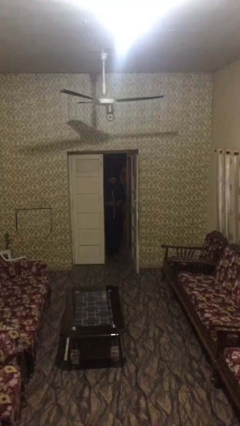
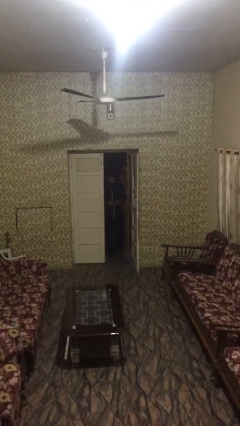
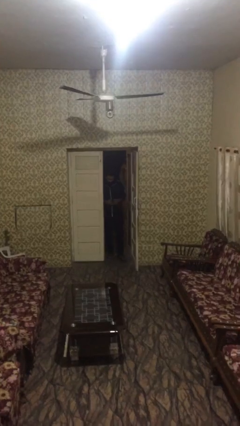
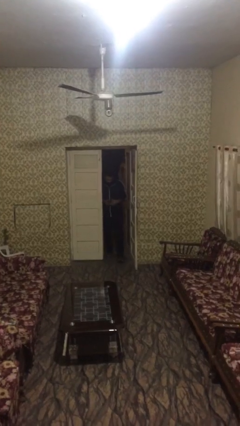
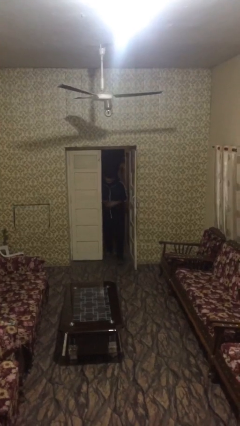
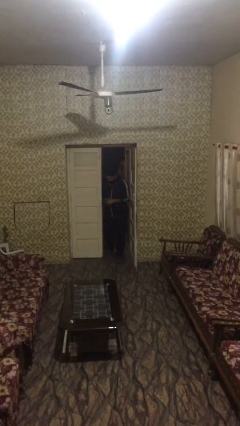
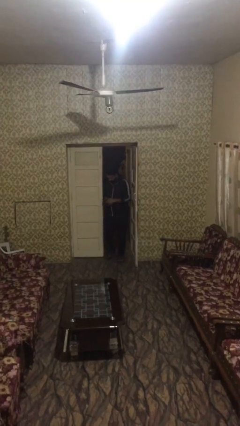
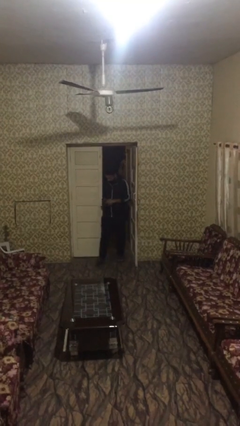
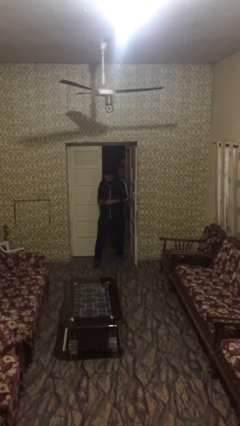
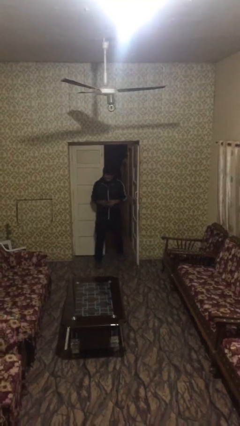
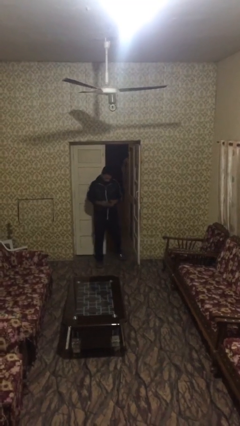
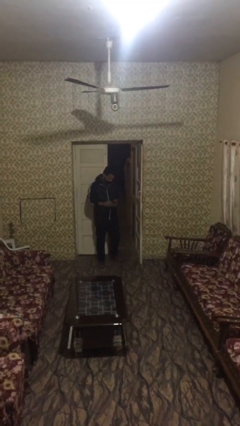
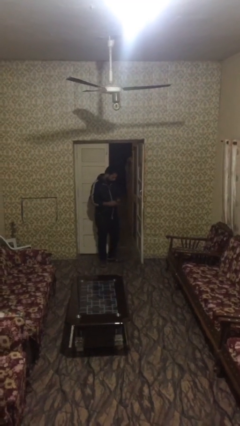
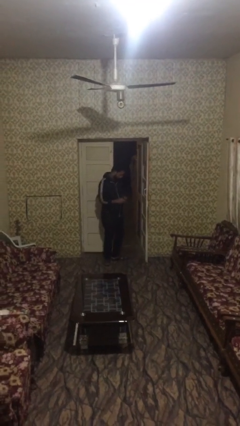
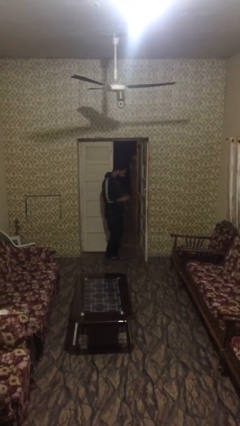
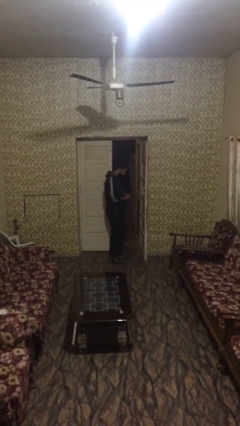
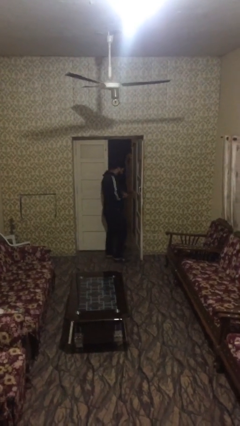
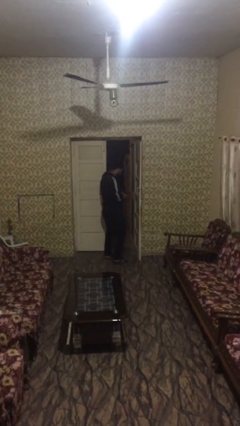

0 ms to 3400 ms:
person enters scene through structure

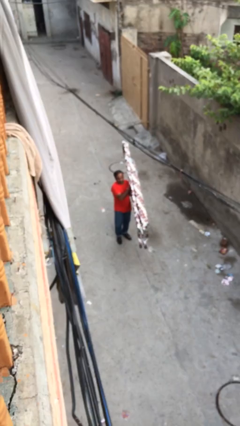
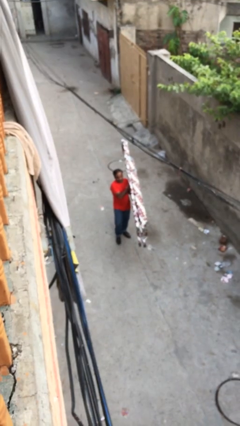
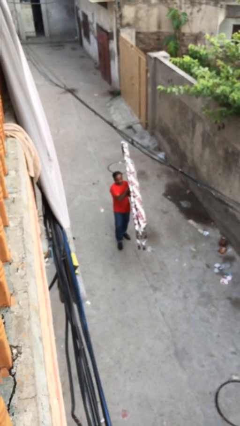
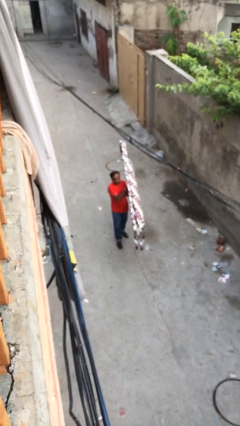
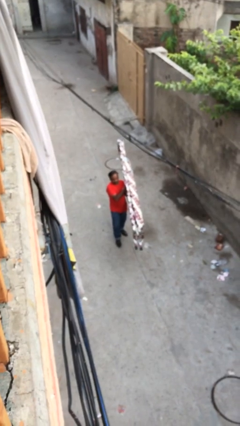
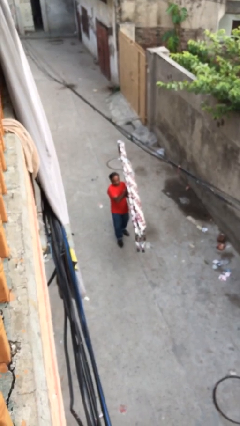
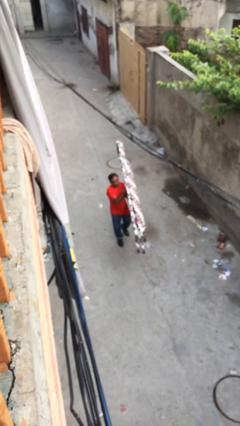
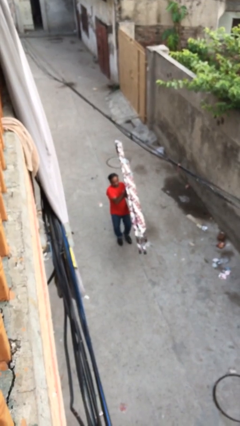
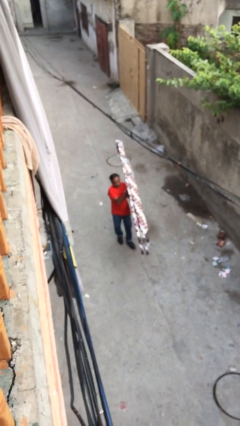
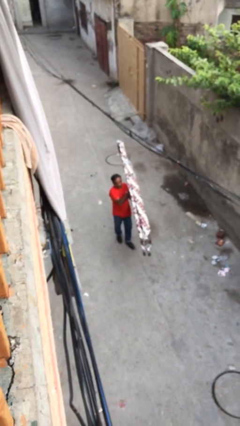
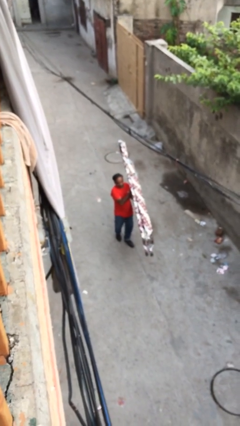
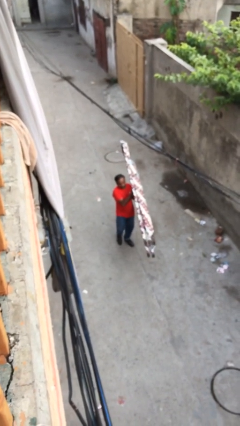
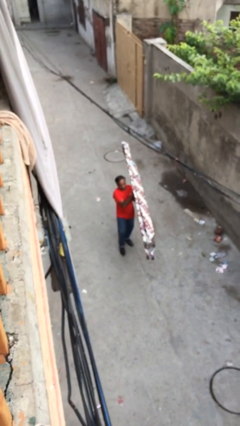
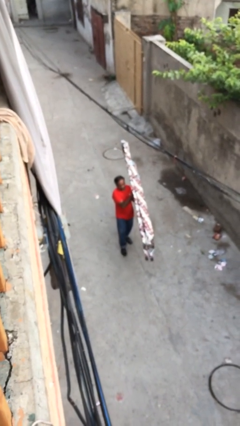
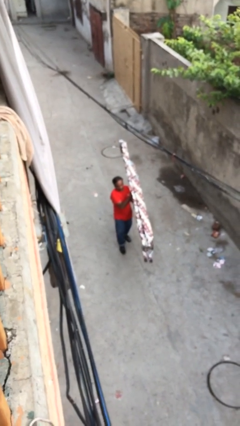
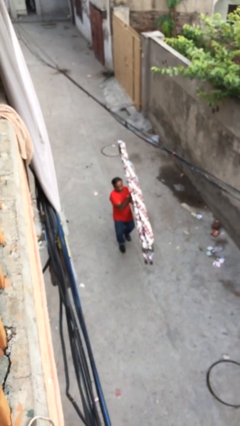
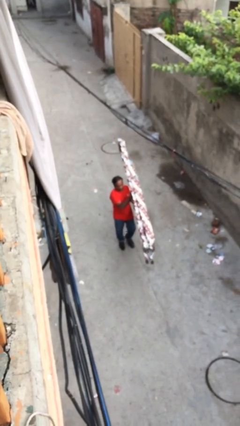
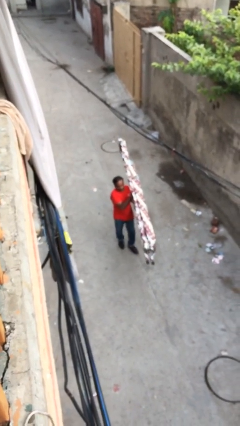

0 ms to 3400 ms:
person carries heavy object

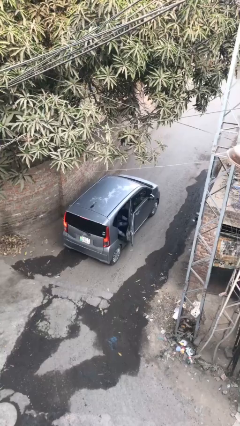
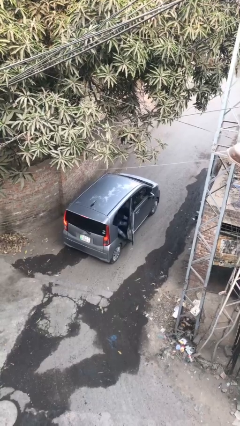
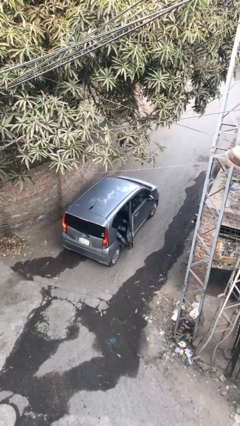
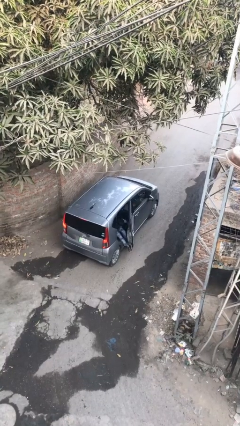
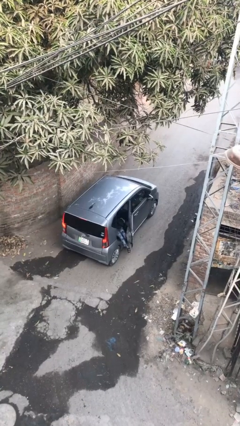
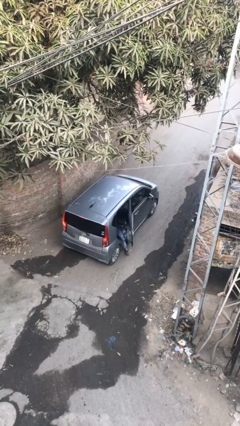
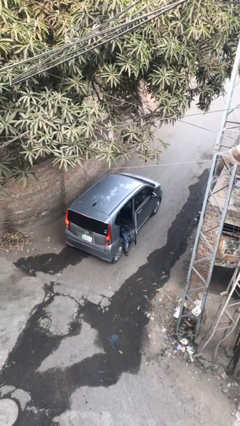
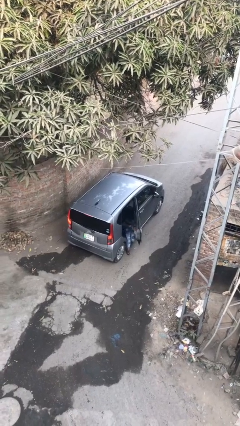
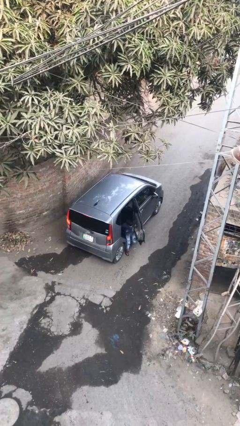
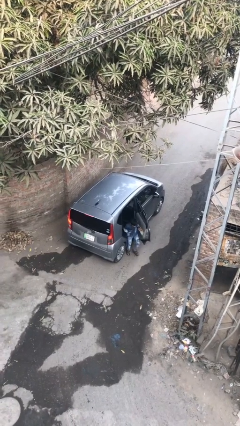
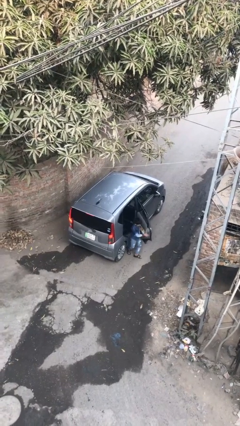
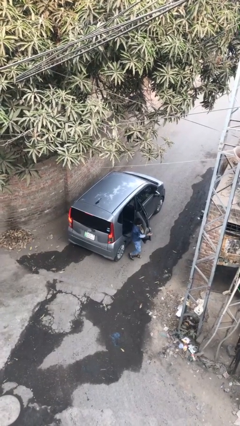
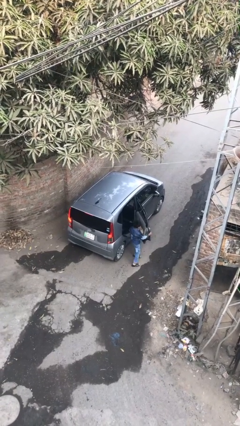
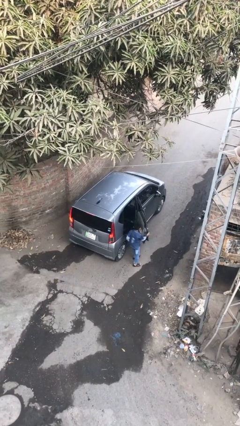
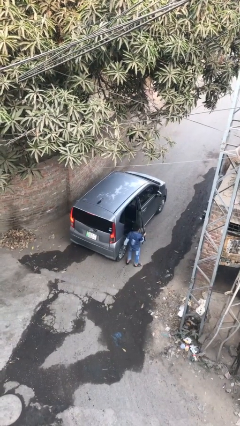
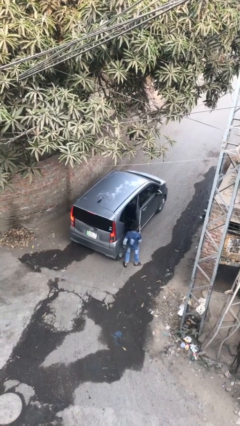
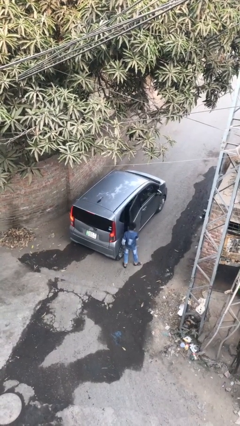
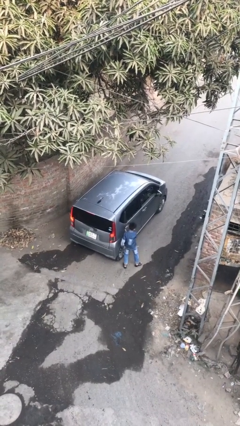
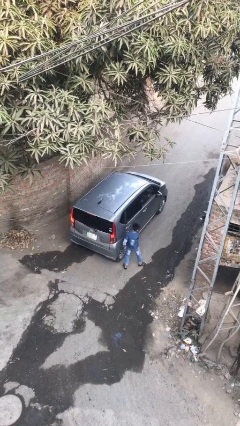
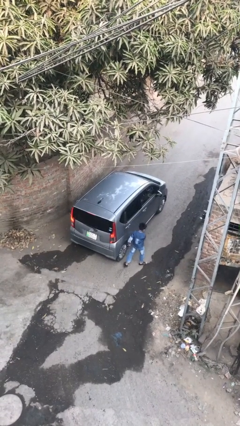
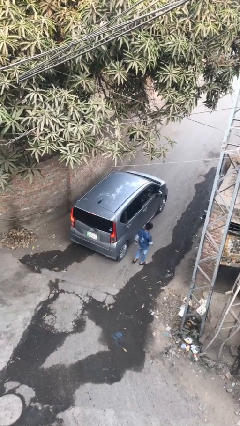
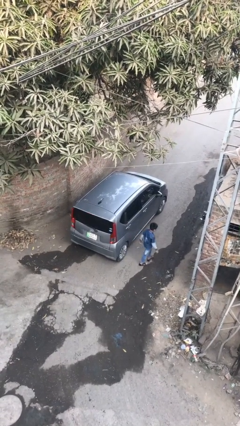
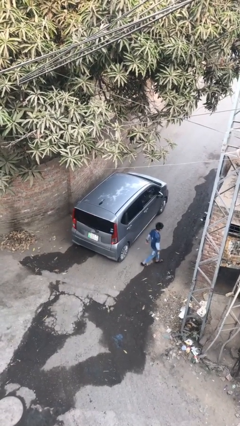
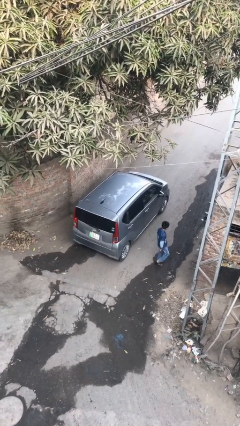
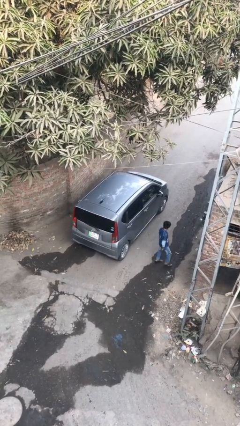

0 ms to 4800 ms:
car drops off person

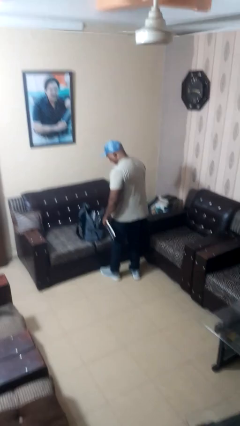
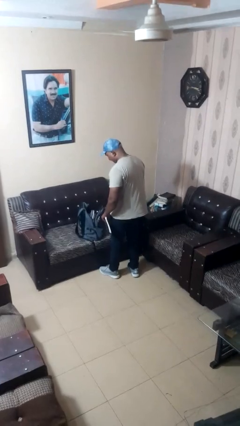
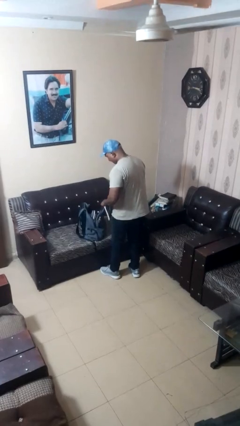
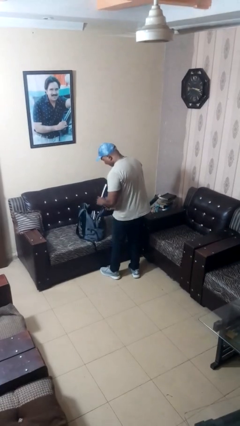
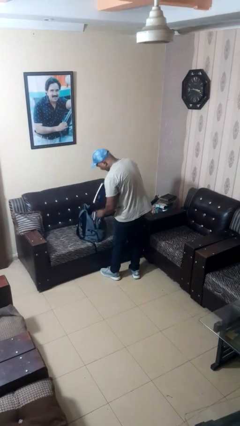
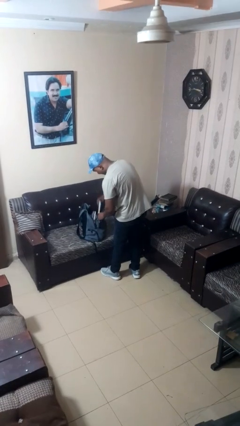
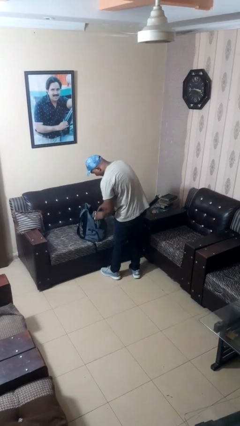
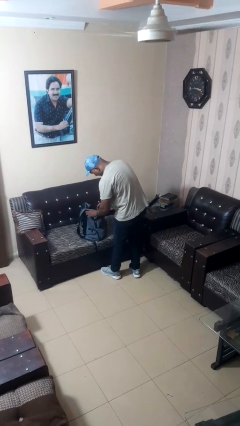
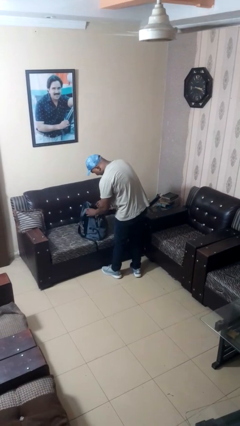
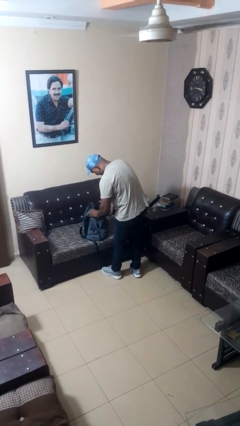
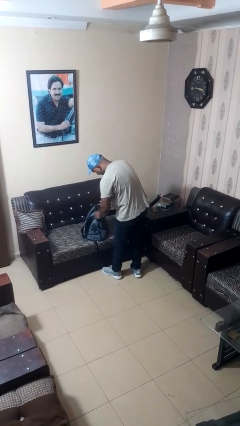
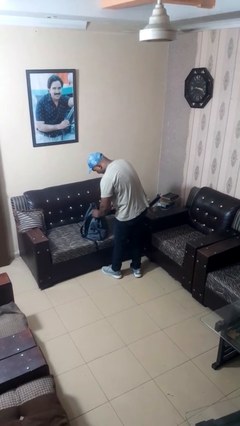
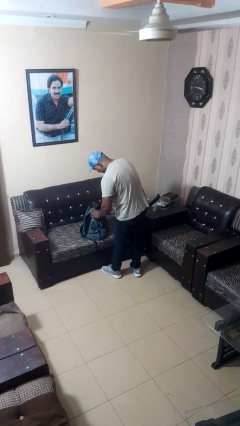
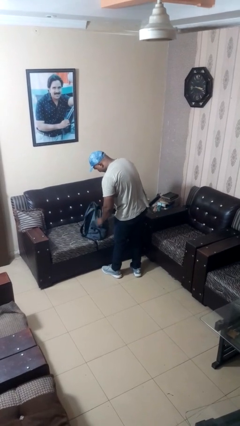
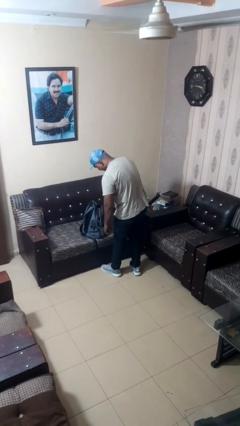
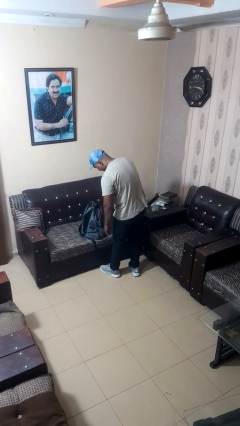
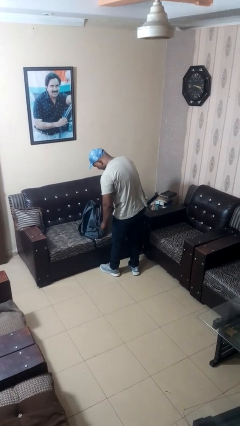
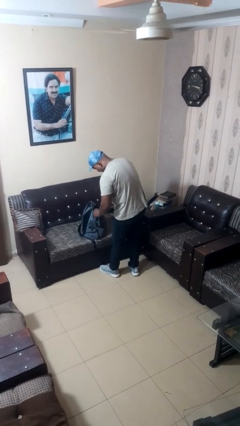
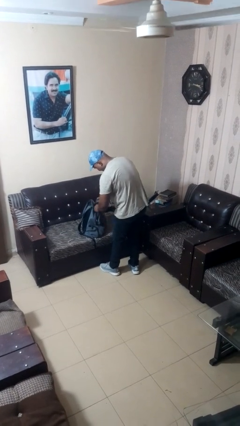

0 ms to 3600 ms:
person puts object into backpack

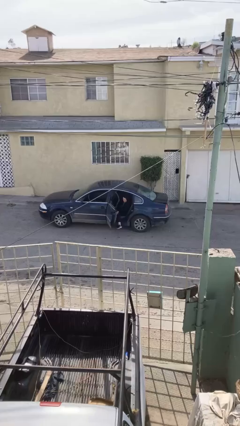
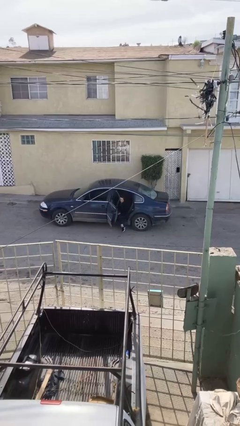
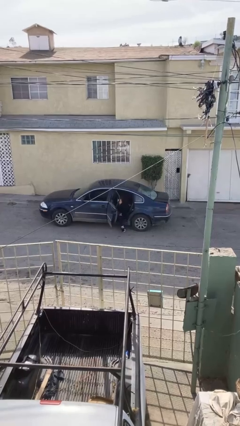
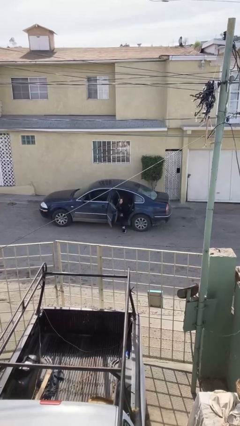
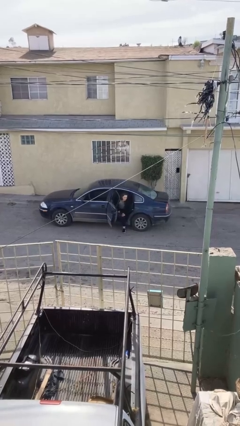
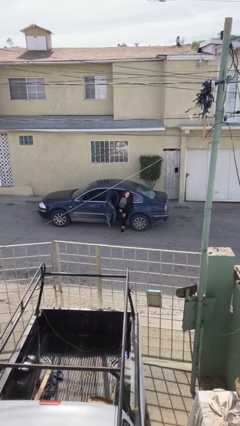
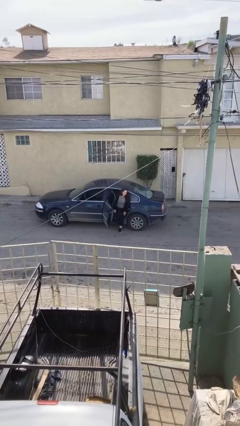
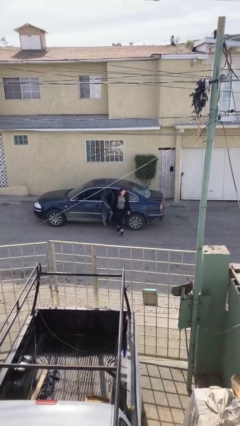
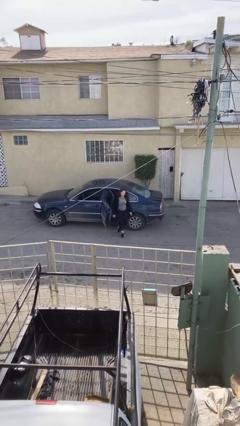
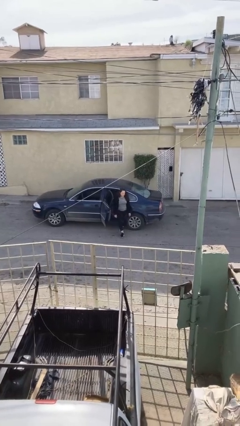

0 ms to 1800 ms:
person exits car

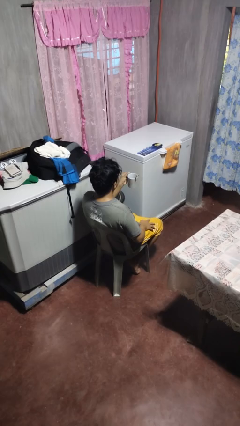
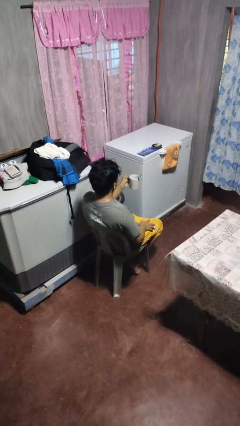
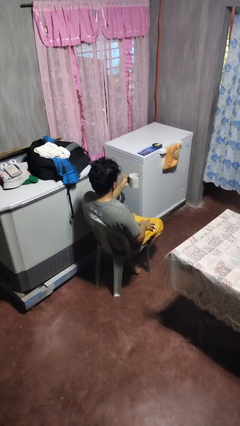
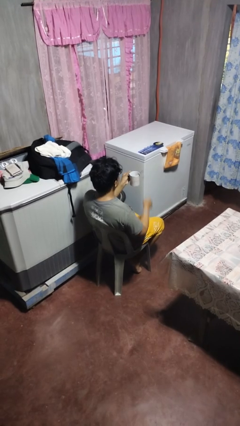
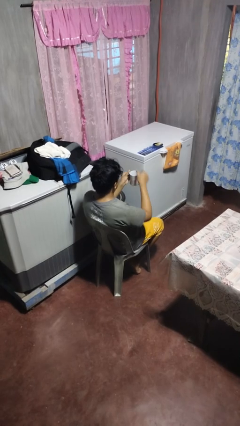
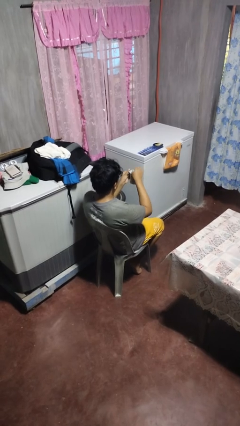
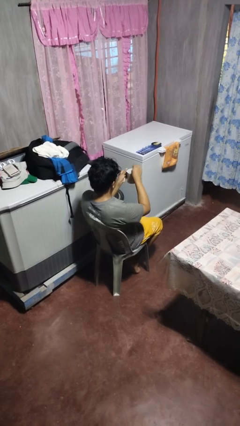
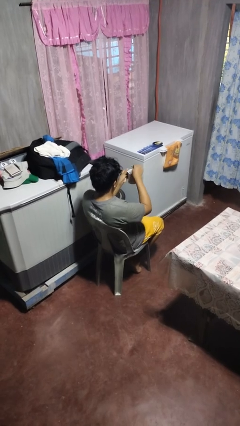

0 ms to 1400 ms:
person stirs mug
